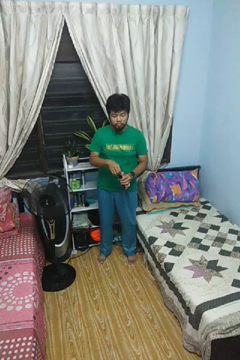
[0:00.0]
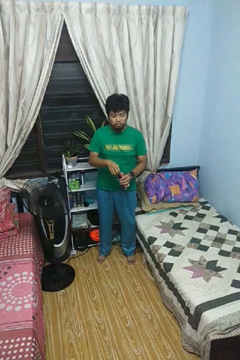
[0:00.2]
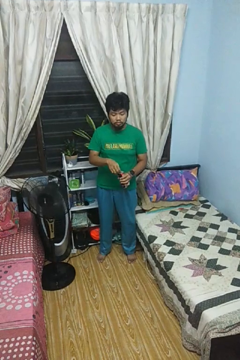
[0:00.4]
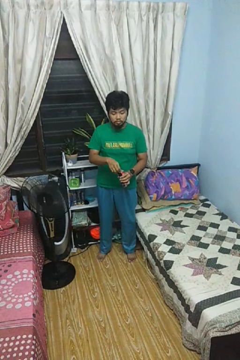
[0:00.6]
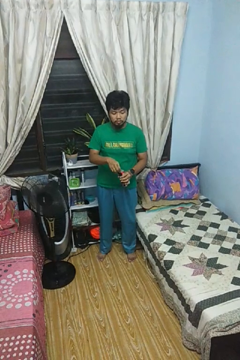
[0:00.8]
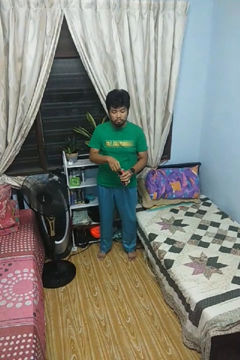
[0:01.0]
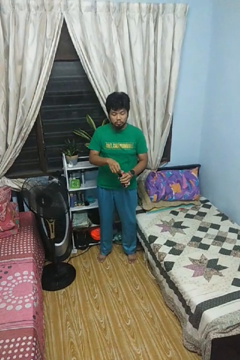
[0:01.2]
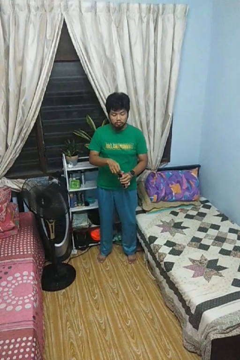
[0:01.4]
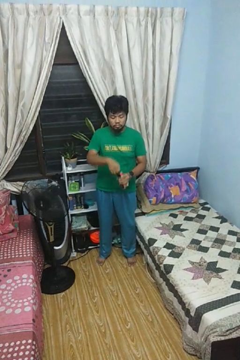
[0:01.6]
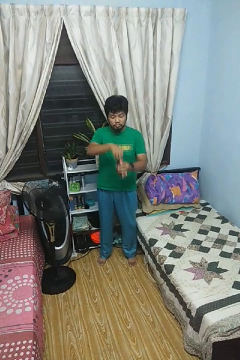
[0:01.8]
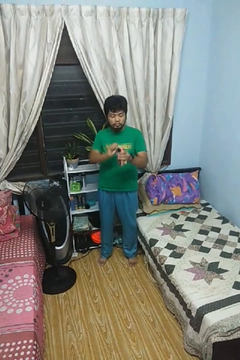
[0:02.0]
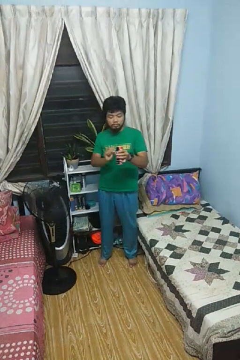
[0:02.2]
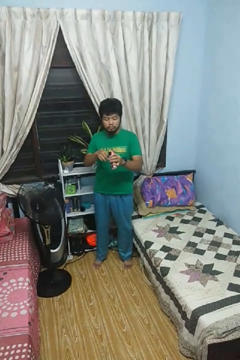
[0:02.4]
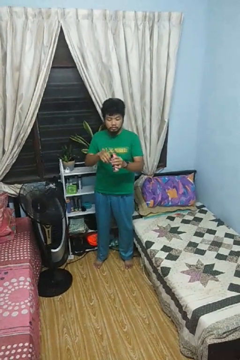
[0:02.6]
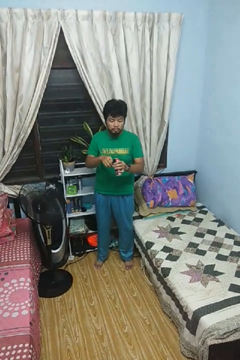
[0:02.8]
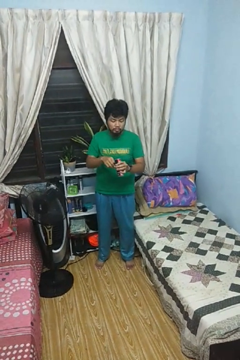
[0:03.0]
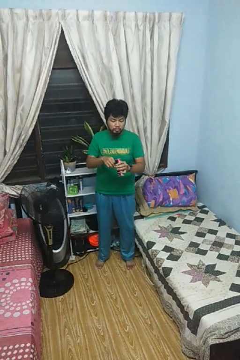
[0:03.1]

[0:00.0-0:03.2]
person opens beverage can

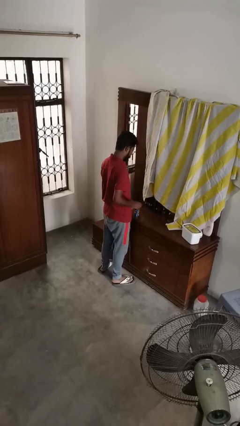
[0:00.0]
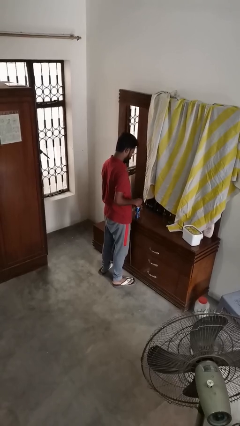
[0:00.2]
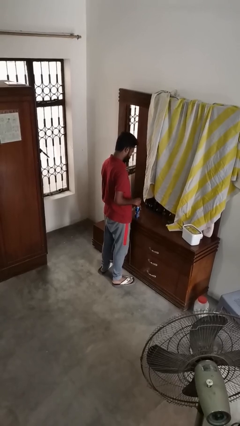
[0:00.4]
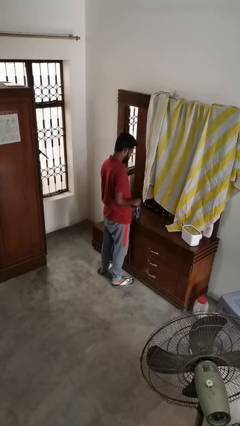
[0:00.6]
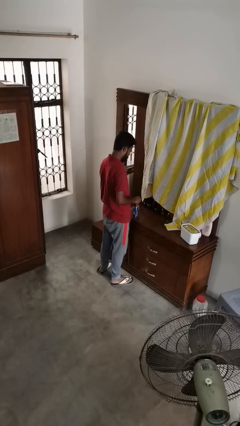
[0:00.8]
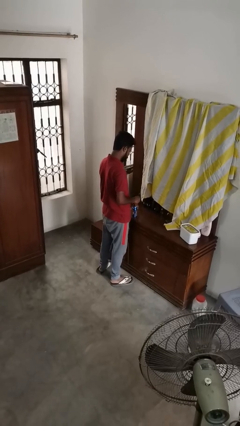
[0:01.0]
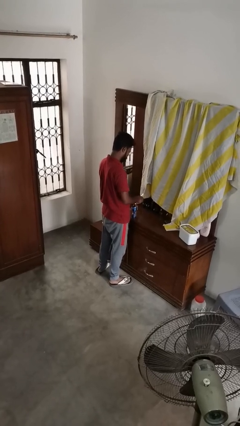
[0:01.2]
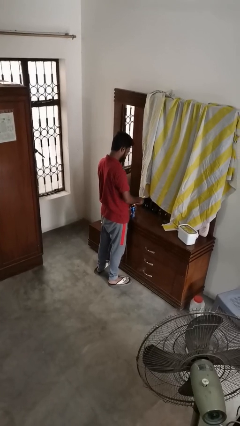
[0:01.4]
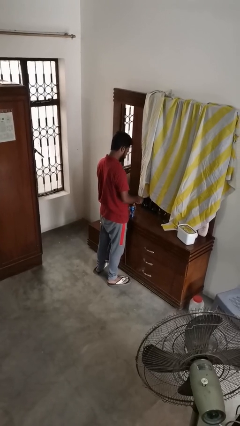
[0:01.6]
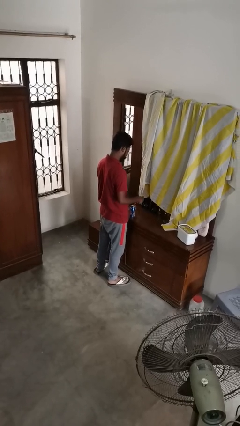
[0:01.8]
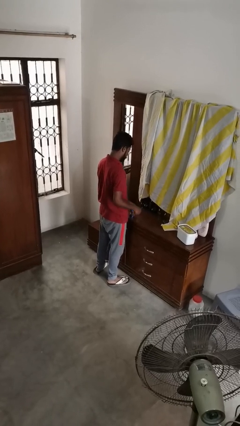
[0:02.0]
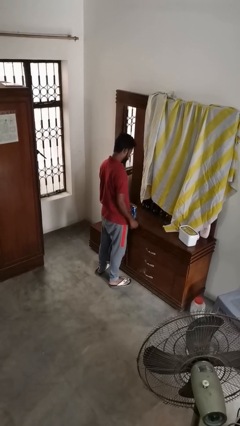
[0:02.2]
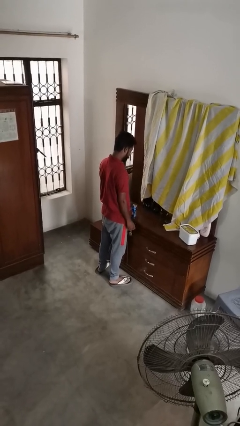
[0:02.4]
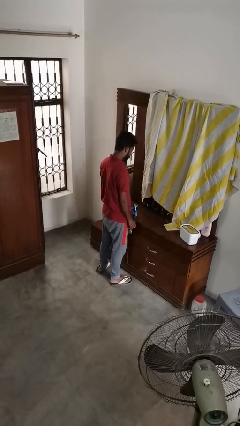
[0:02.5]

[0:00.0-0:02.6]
person opens can with can opener

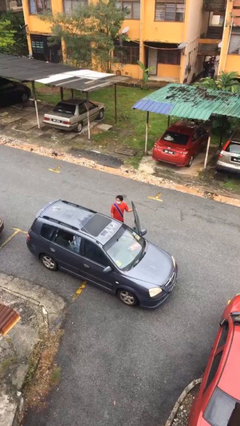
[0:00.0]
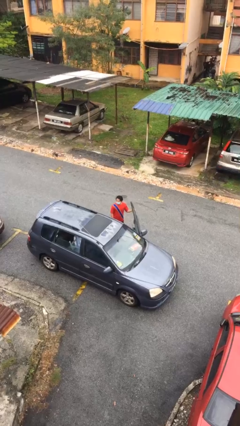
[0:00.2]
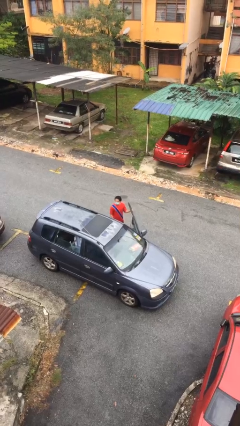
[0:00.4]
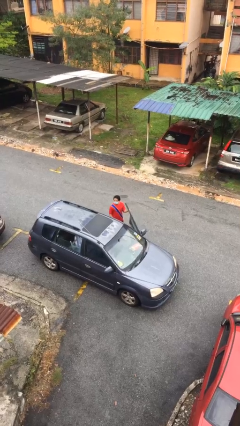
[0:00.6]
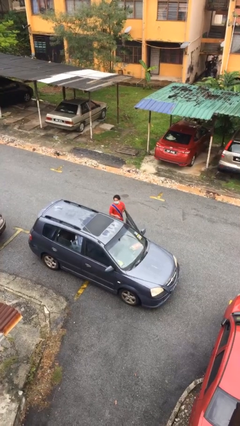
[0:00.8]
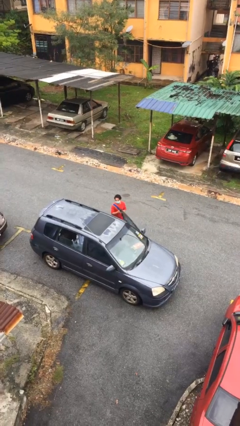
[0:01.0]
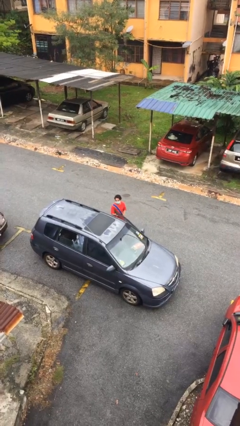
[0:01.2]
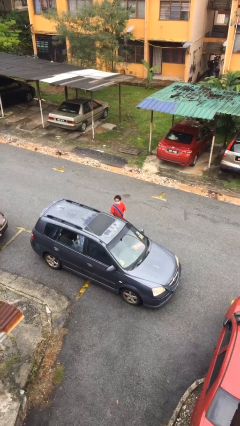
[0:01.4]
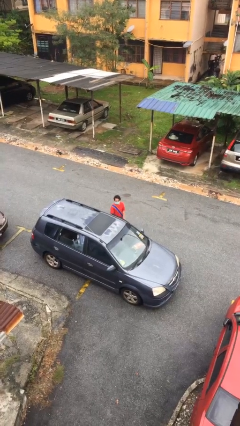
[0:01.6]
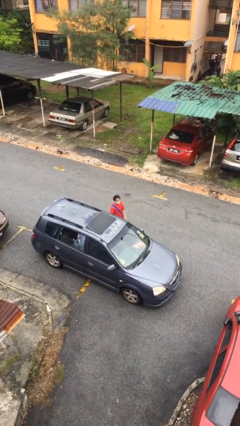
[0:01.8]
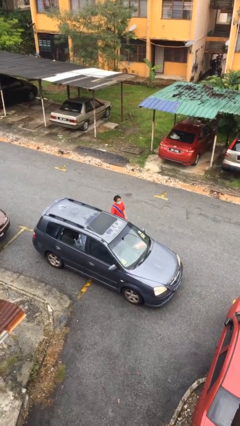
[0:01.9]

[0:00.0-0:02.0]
person closes car door

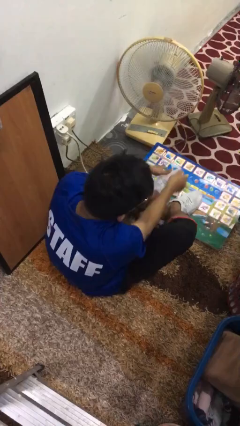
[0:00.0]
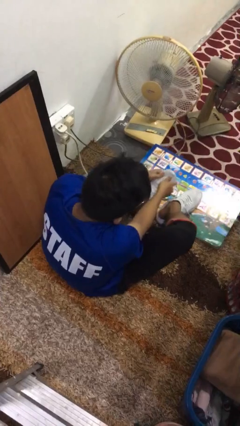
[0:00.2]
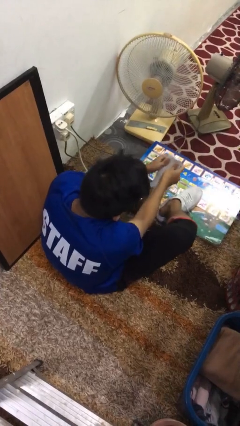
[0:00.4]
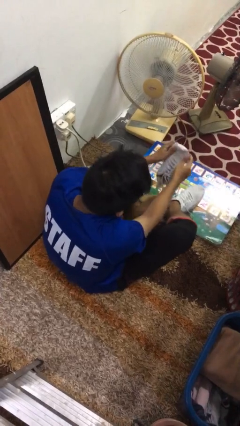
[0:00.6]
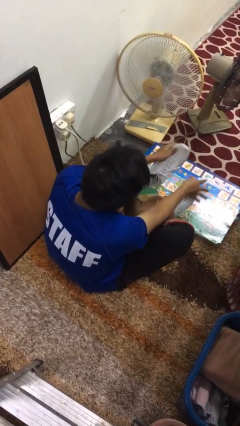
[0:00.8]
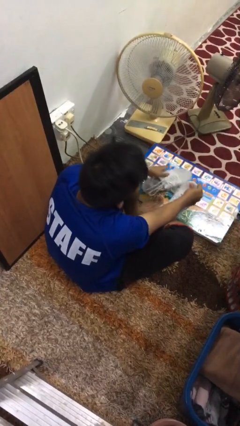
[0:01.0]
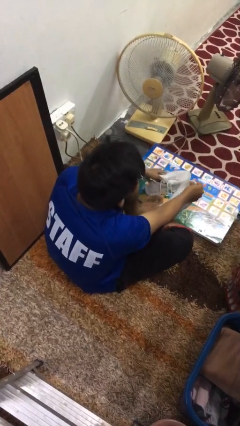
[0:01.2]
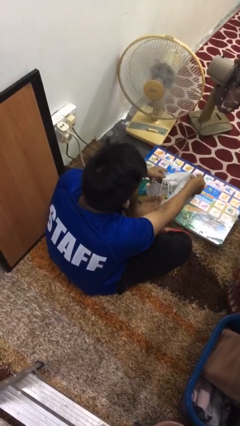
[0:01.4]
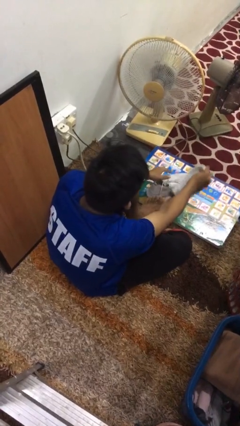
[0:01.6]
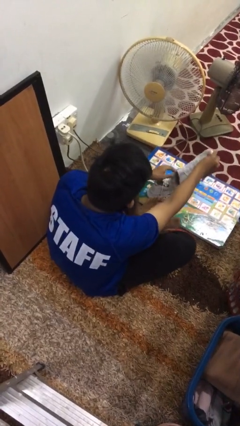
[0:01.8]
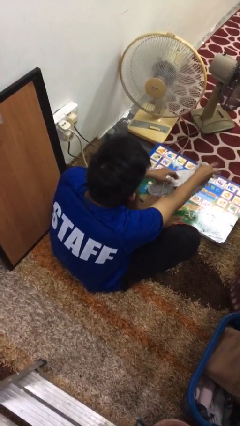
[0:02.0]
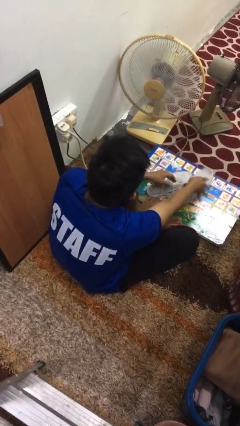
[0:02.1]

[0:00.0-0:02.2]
person takes off shoes

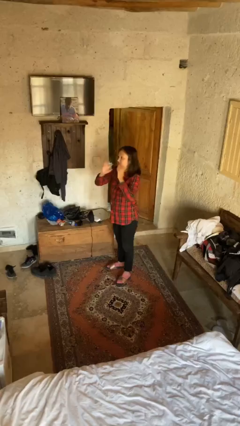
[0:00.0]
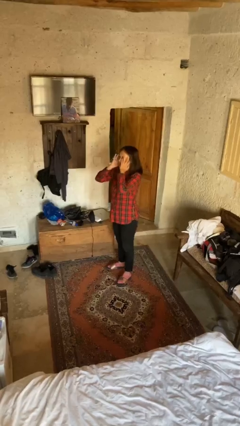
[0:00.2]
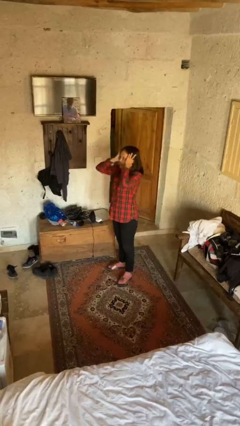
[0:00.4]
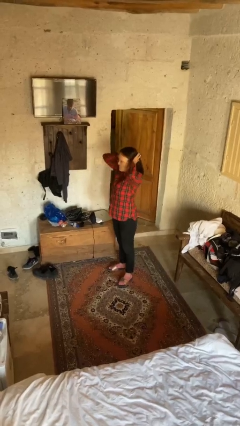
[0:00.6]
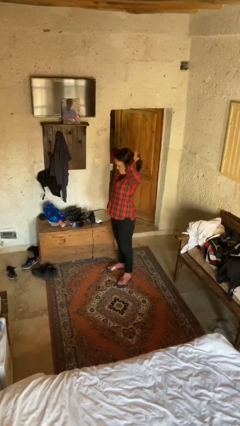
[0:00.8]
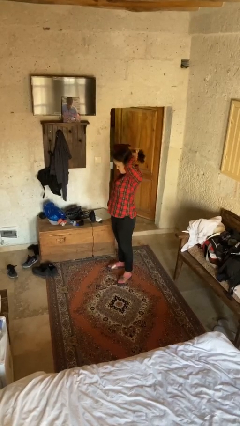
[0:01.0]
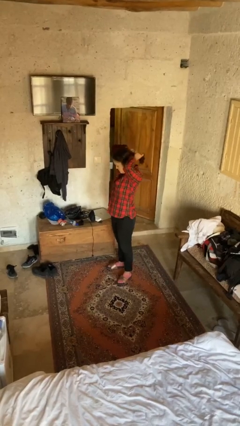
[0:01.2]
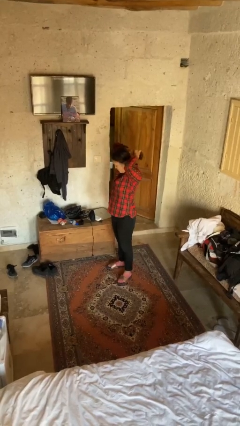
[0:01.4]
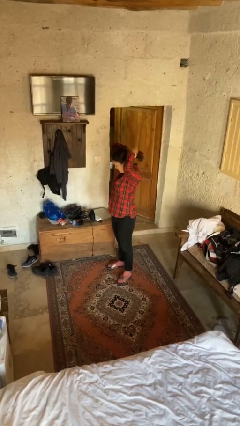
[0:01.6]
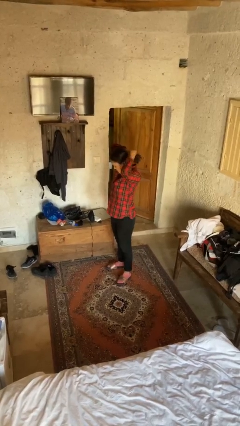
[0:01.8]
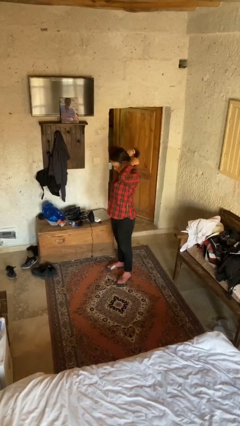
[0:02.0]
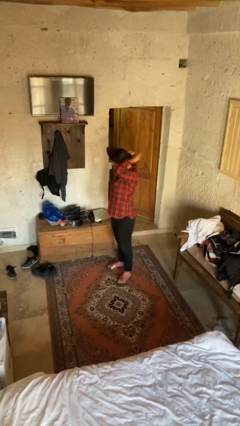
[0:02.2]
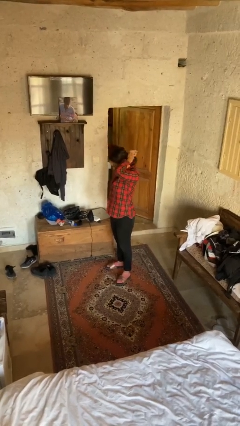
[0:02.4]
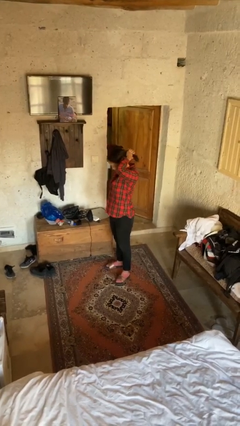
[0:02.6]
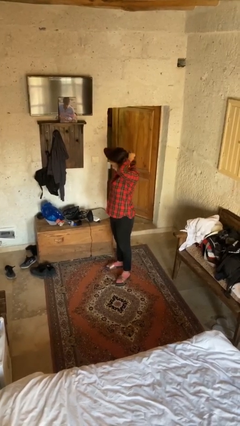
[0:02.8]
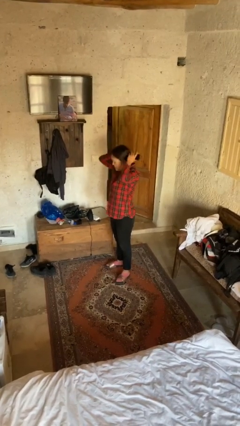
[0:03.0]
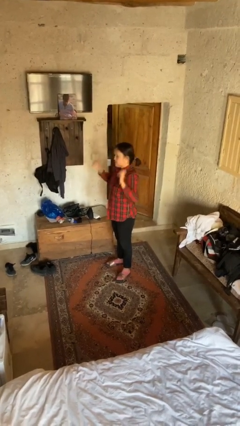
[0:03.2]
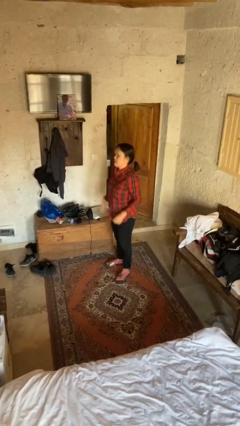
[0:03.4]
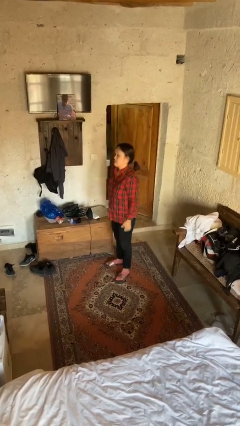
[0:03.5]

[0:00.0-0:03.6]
person puts hair in ponytail

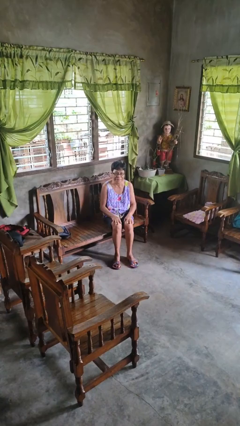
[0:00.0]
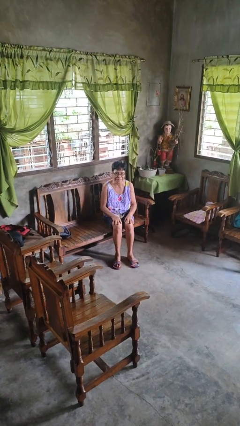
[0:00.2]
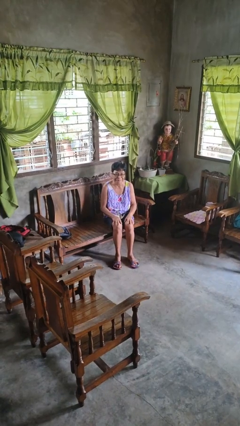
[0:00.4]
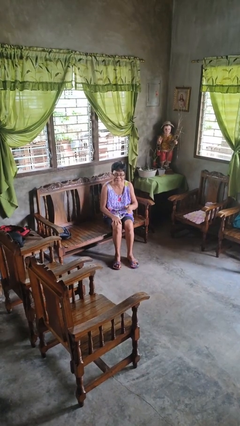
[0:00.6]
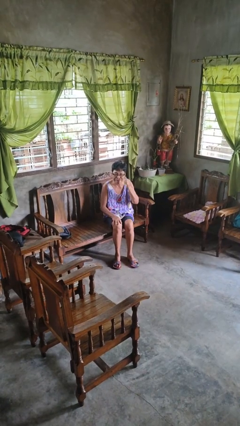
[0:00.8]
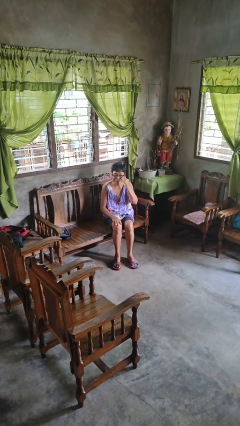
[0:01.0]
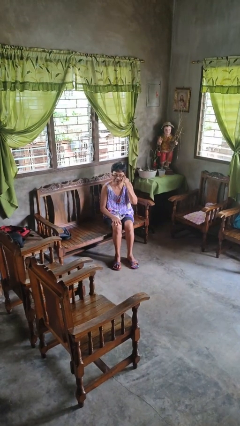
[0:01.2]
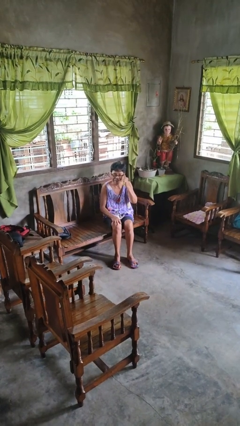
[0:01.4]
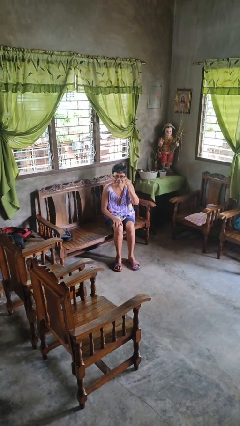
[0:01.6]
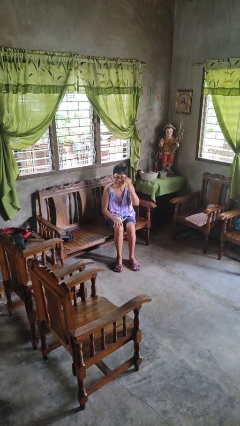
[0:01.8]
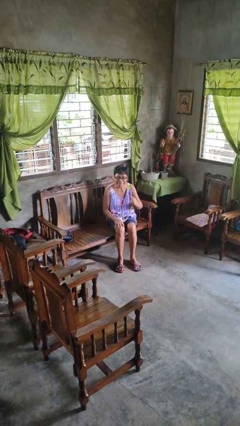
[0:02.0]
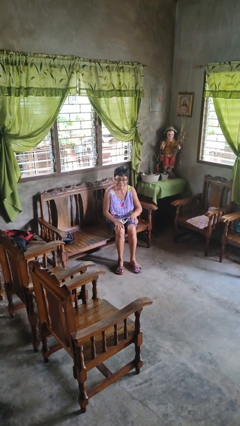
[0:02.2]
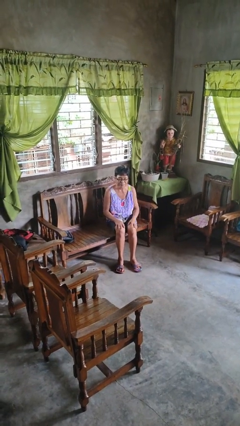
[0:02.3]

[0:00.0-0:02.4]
person gestures behind me

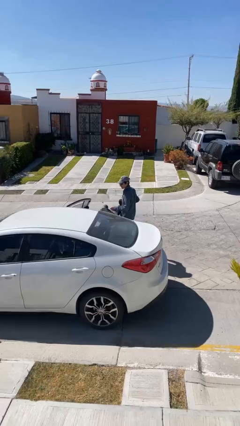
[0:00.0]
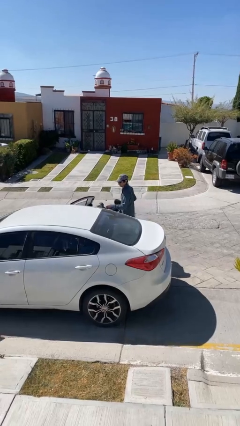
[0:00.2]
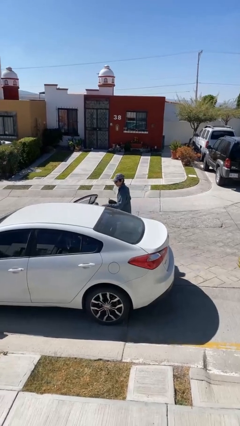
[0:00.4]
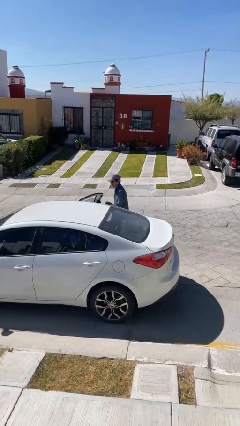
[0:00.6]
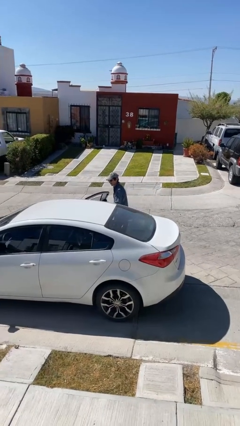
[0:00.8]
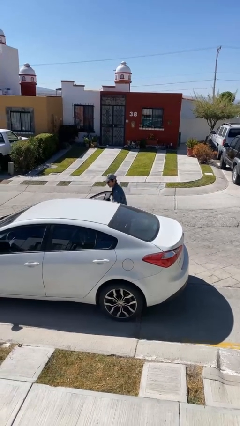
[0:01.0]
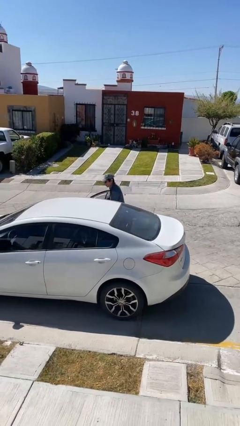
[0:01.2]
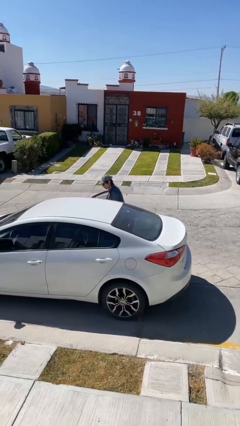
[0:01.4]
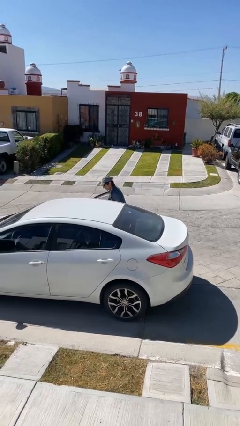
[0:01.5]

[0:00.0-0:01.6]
person loads car
